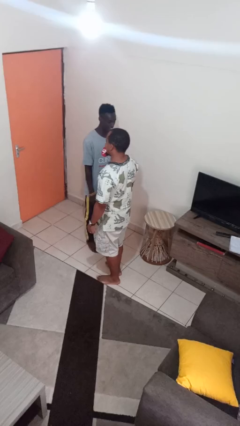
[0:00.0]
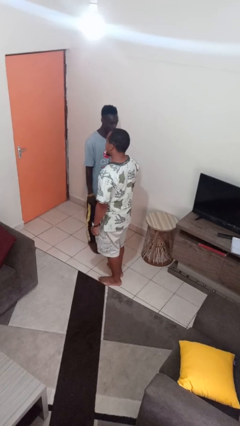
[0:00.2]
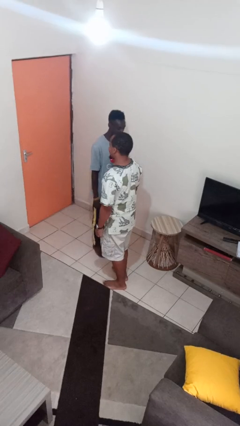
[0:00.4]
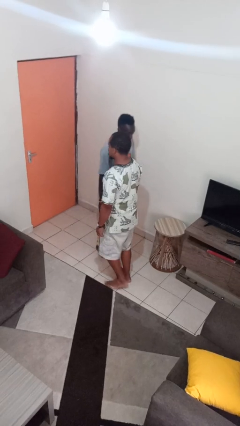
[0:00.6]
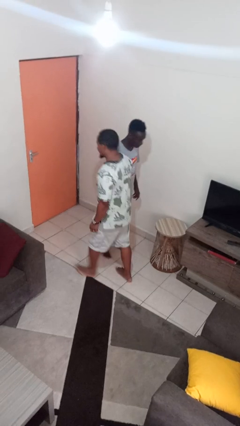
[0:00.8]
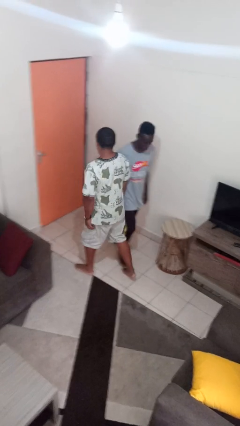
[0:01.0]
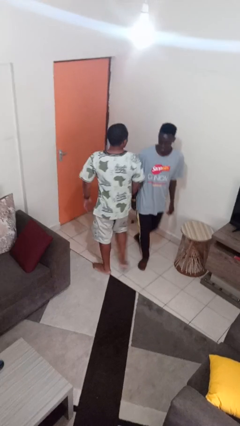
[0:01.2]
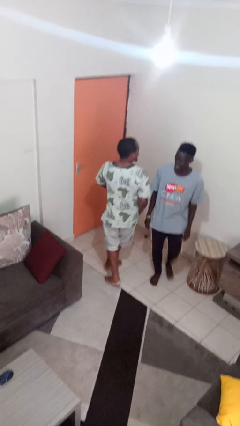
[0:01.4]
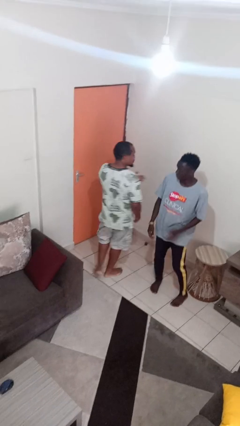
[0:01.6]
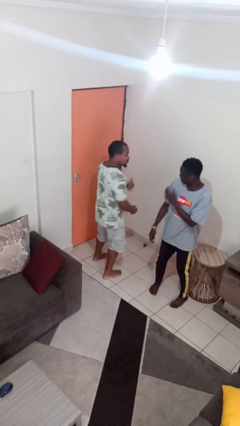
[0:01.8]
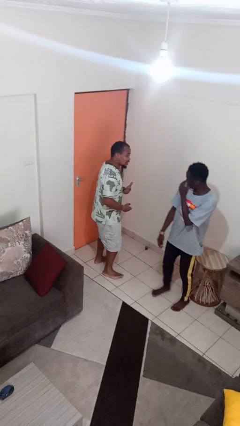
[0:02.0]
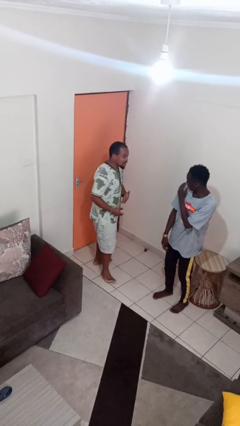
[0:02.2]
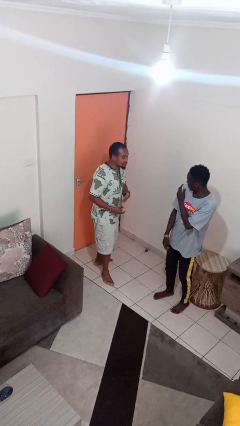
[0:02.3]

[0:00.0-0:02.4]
person bumps into person

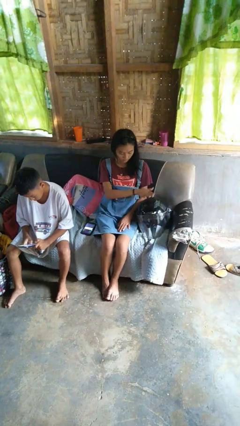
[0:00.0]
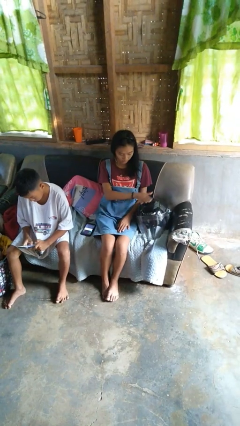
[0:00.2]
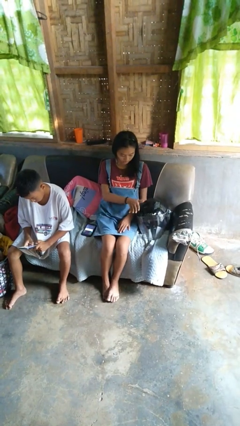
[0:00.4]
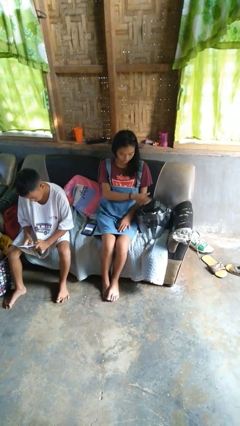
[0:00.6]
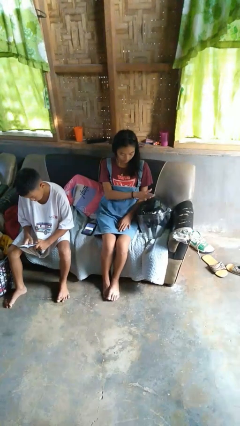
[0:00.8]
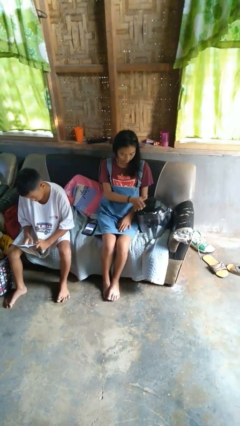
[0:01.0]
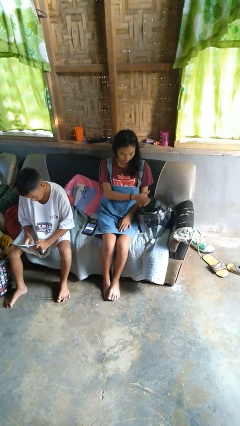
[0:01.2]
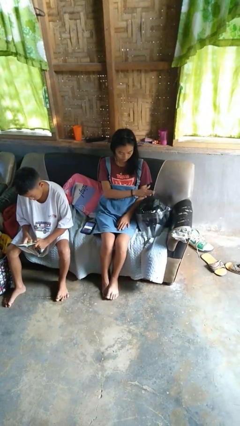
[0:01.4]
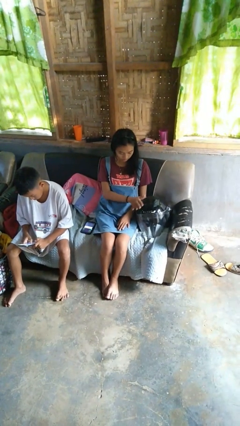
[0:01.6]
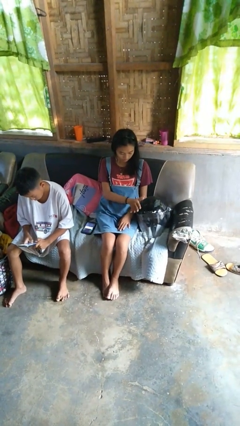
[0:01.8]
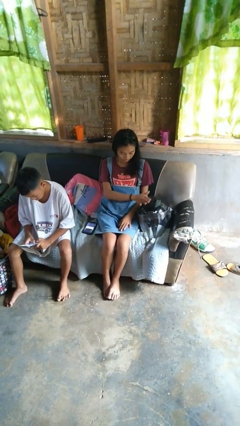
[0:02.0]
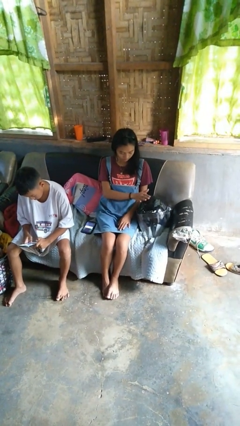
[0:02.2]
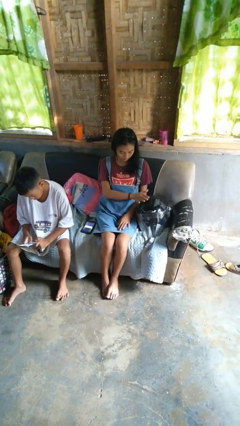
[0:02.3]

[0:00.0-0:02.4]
person waves hand over object

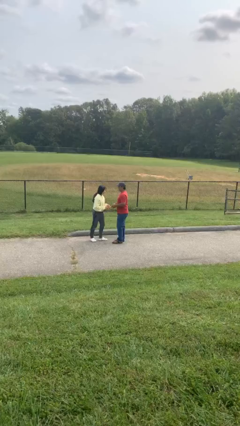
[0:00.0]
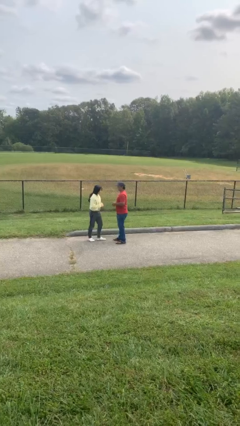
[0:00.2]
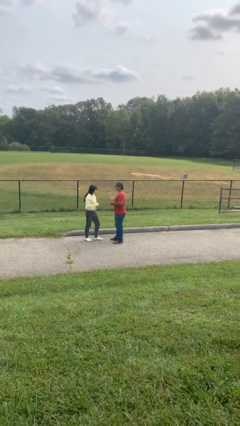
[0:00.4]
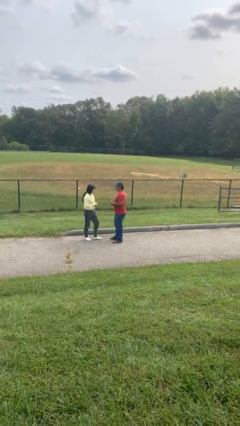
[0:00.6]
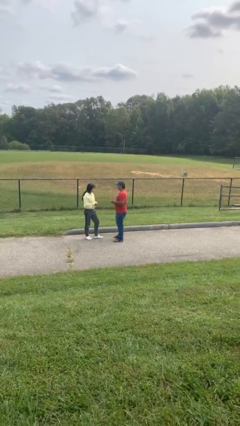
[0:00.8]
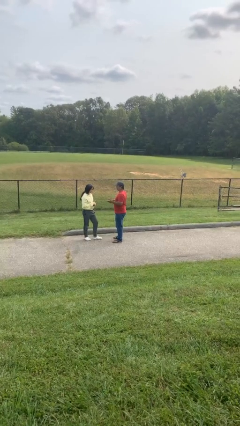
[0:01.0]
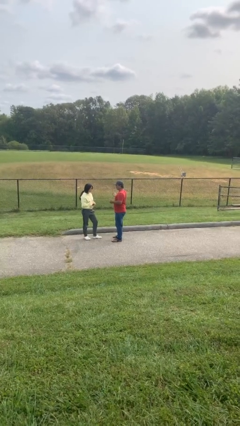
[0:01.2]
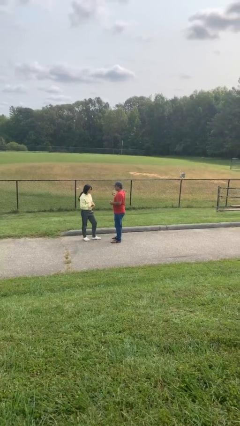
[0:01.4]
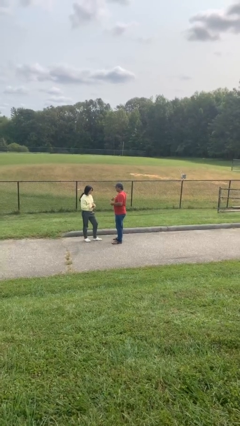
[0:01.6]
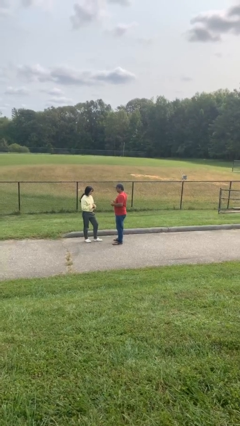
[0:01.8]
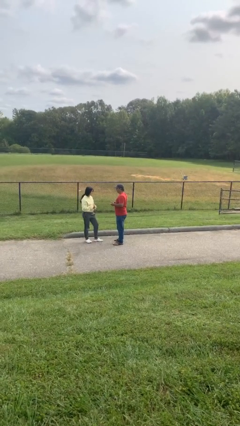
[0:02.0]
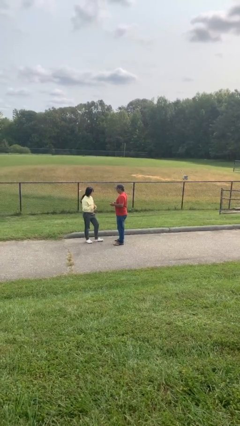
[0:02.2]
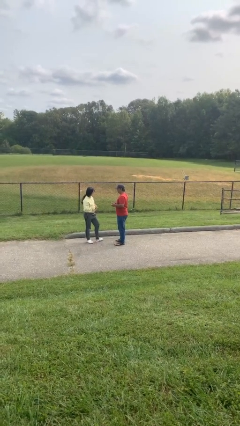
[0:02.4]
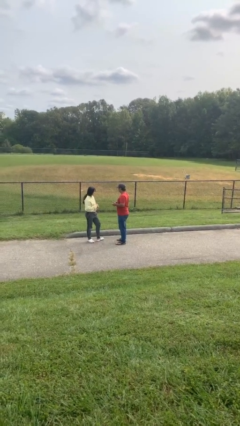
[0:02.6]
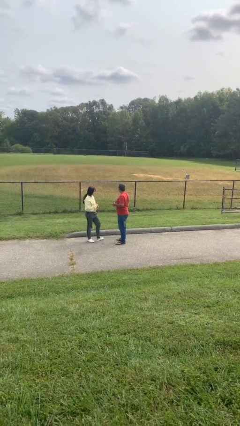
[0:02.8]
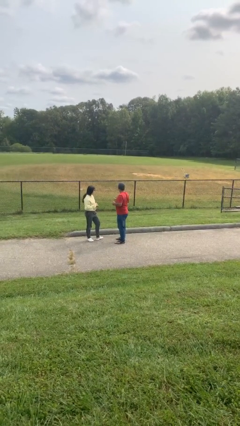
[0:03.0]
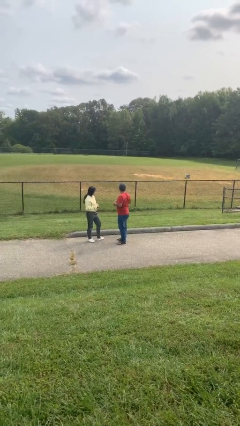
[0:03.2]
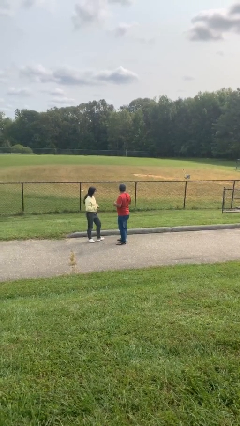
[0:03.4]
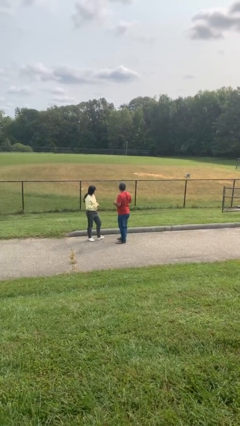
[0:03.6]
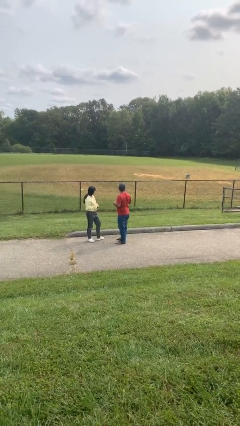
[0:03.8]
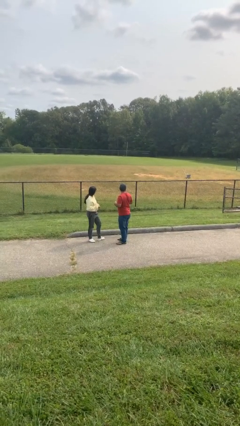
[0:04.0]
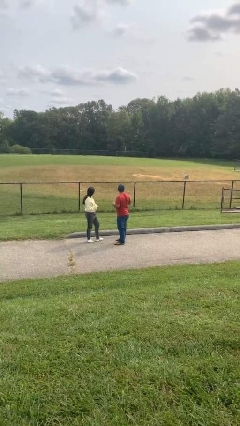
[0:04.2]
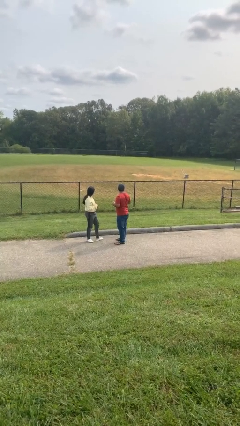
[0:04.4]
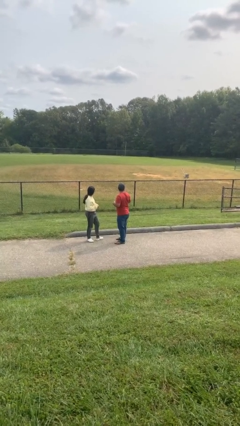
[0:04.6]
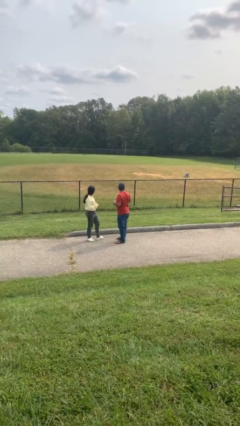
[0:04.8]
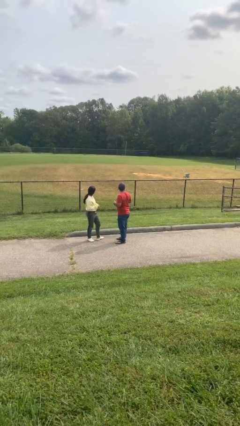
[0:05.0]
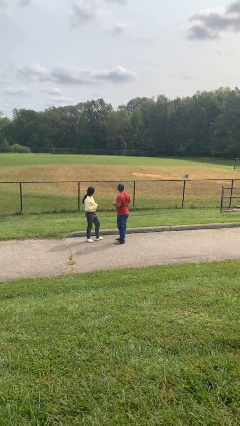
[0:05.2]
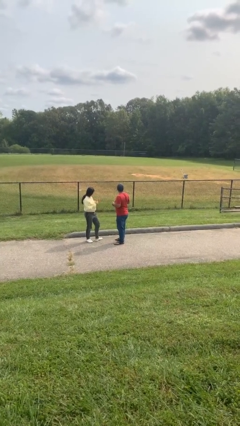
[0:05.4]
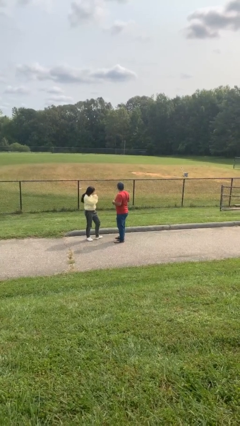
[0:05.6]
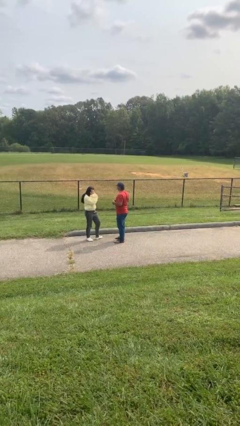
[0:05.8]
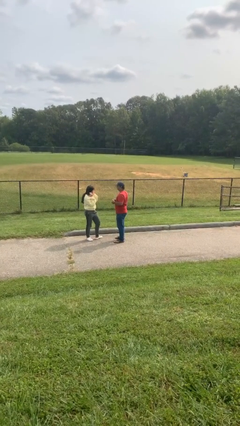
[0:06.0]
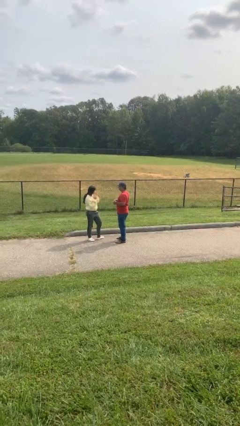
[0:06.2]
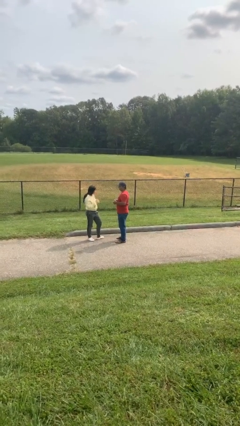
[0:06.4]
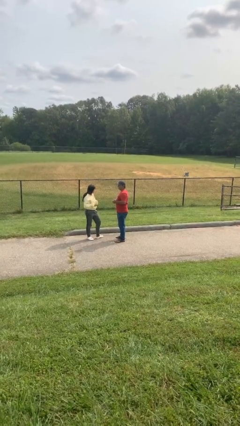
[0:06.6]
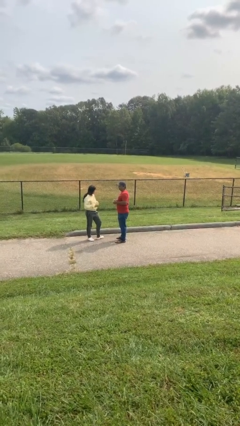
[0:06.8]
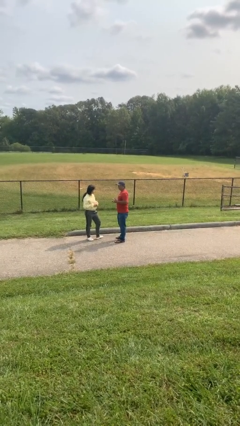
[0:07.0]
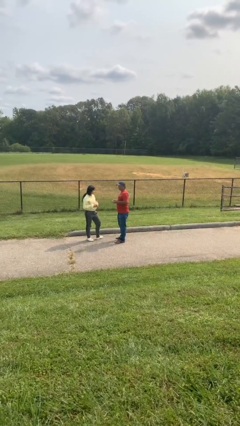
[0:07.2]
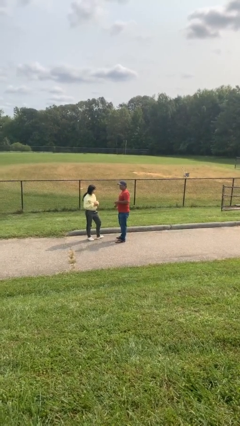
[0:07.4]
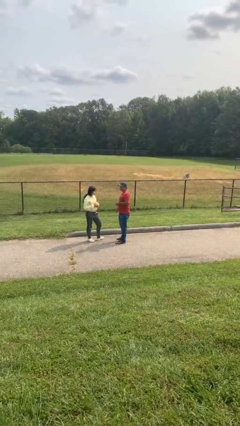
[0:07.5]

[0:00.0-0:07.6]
person talks to person

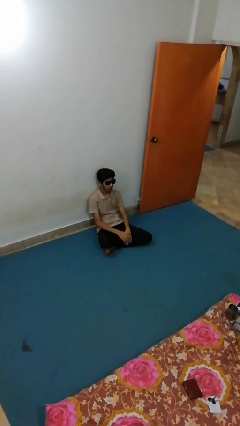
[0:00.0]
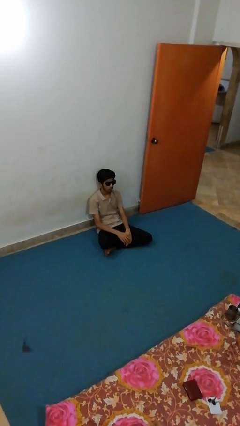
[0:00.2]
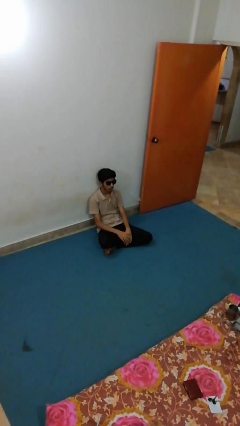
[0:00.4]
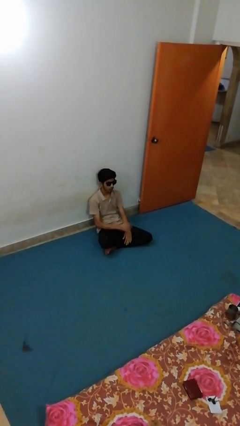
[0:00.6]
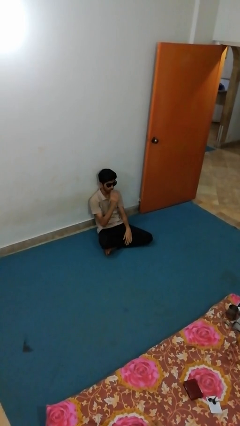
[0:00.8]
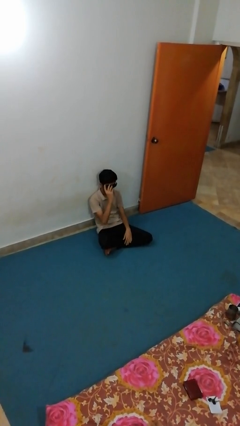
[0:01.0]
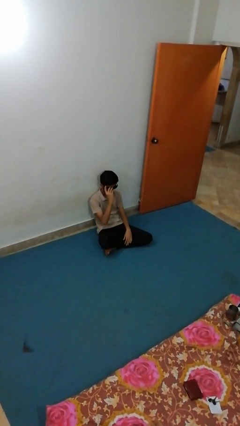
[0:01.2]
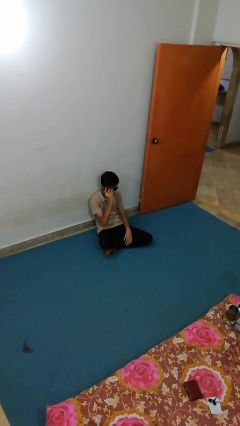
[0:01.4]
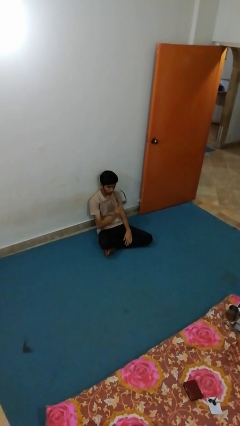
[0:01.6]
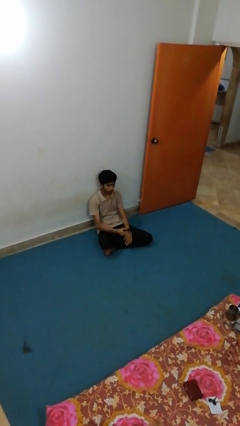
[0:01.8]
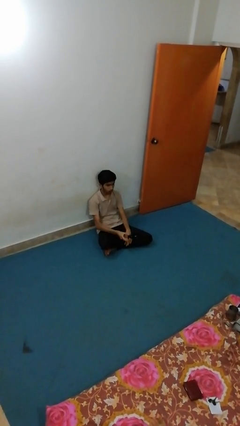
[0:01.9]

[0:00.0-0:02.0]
person takes off sunglasses

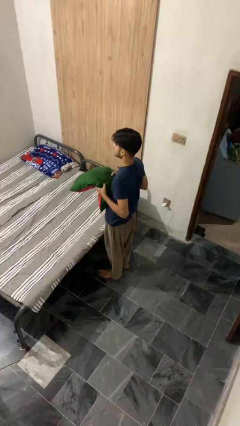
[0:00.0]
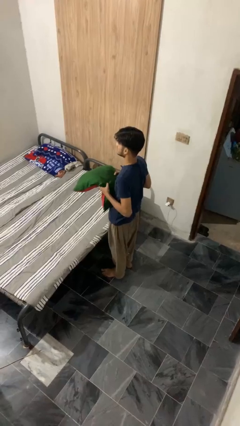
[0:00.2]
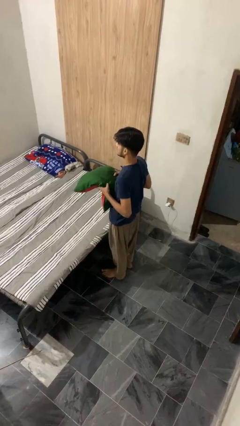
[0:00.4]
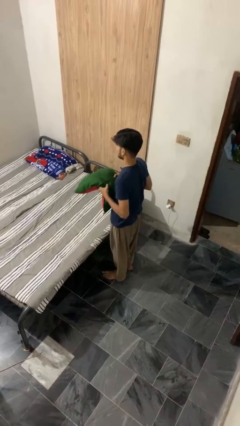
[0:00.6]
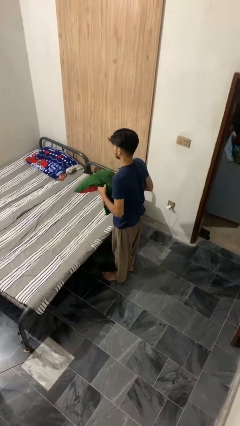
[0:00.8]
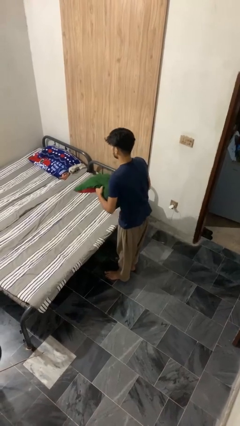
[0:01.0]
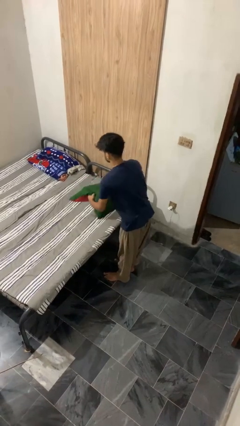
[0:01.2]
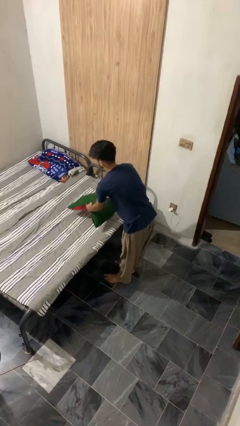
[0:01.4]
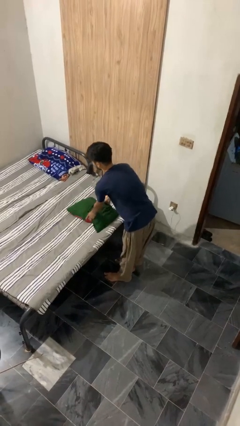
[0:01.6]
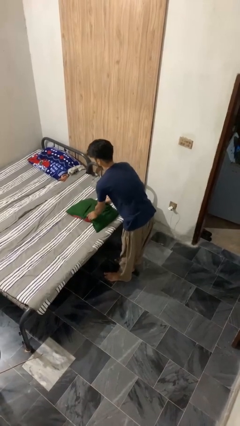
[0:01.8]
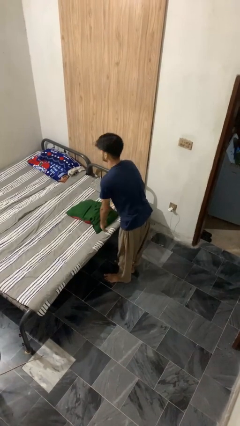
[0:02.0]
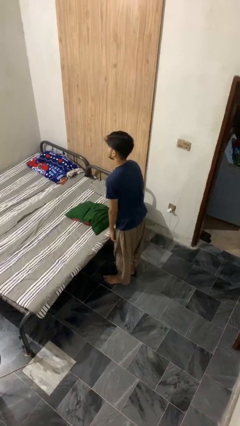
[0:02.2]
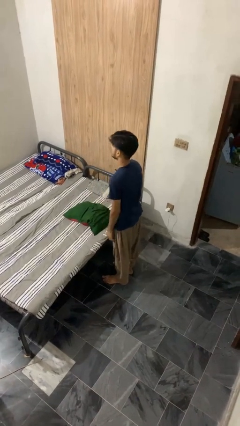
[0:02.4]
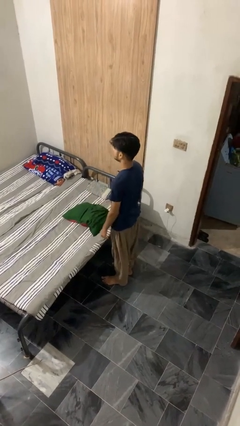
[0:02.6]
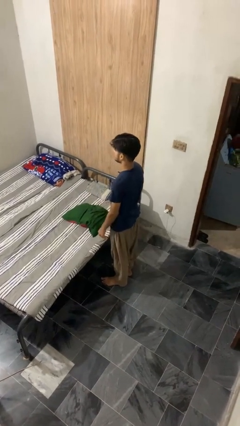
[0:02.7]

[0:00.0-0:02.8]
person puts down object on bed

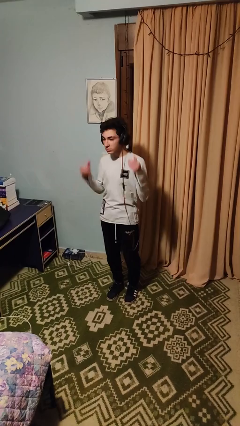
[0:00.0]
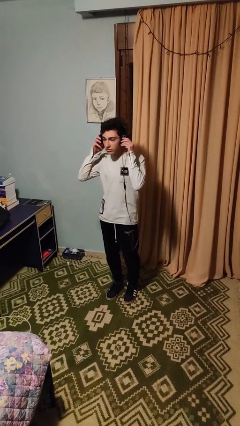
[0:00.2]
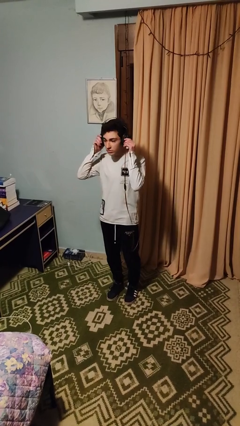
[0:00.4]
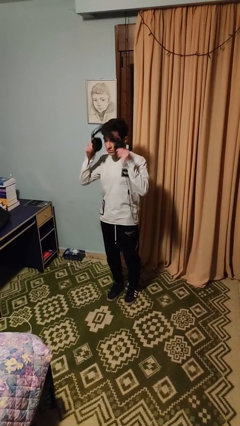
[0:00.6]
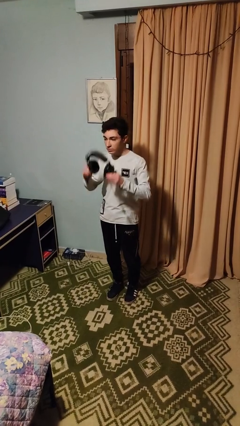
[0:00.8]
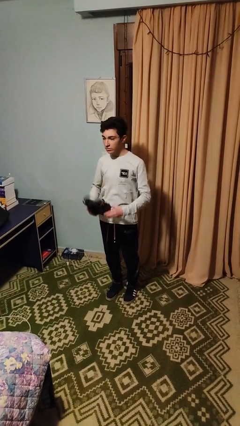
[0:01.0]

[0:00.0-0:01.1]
person takes off headphones
